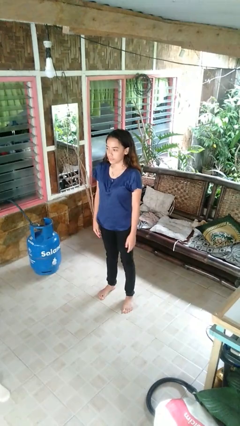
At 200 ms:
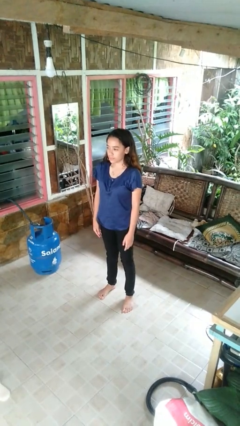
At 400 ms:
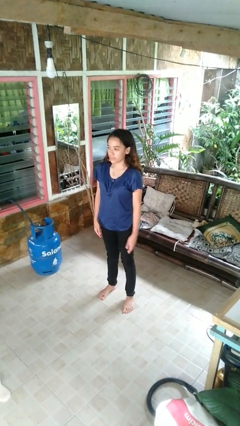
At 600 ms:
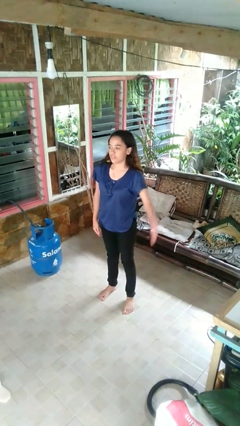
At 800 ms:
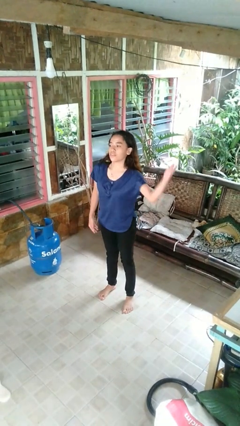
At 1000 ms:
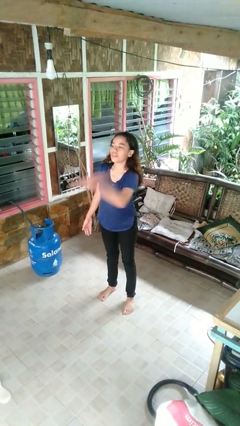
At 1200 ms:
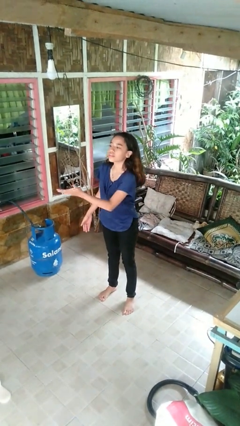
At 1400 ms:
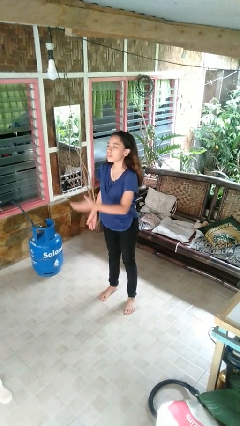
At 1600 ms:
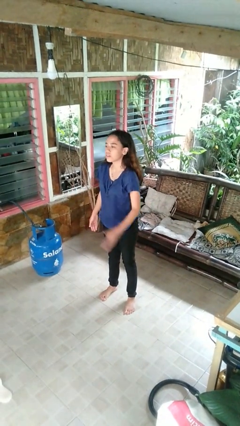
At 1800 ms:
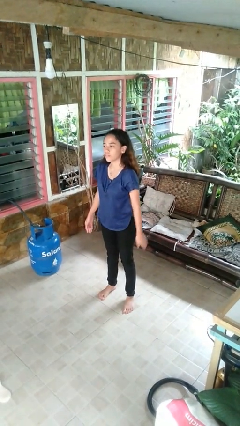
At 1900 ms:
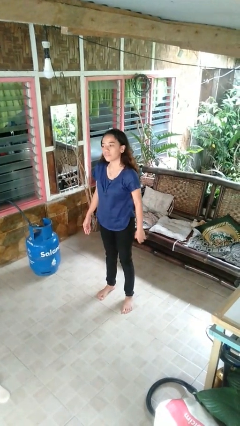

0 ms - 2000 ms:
person karate chop

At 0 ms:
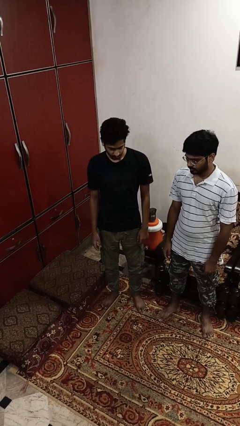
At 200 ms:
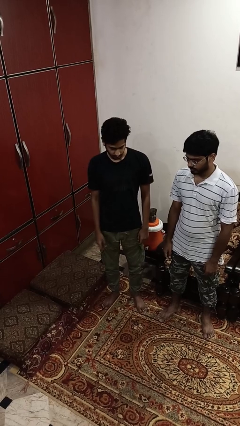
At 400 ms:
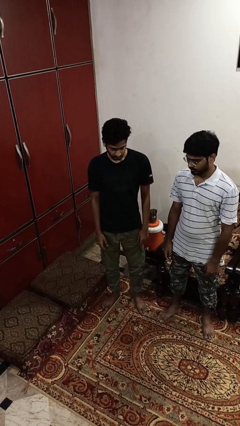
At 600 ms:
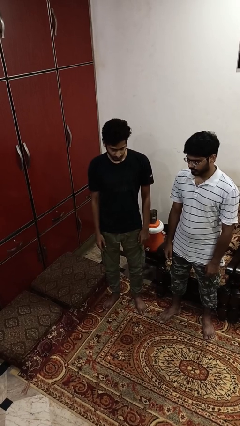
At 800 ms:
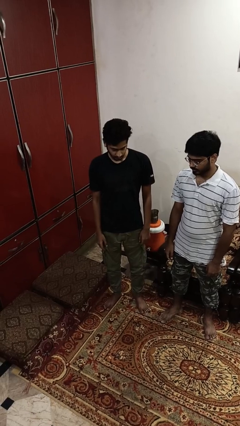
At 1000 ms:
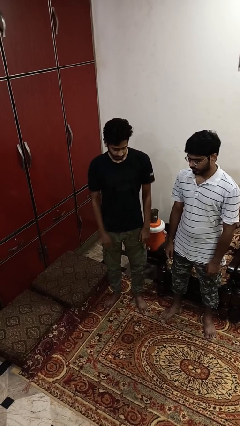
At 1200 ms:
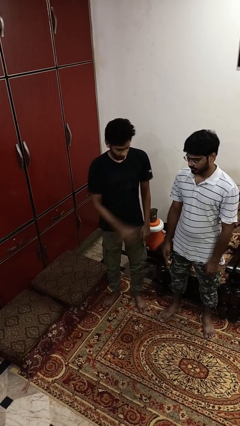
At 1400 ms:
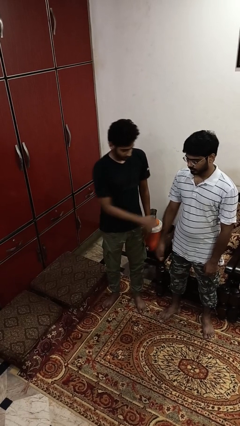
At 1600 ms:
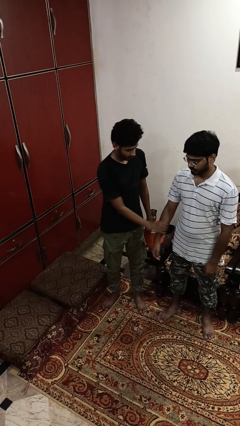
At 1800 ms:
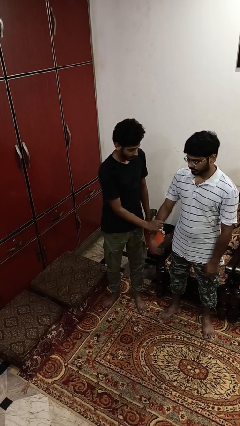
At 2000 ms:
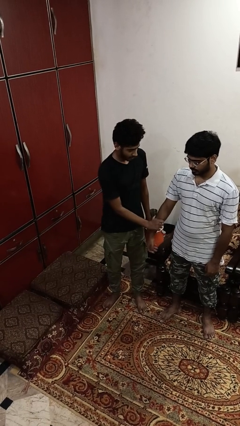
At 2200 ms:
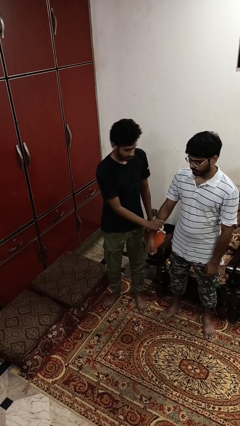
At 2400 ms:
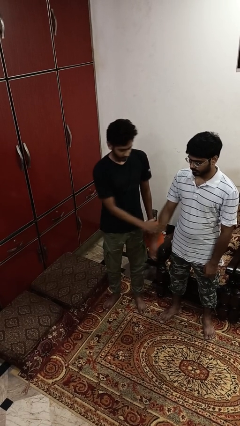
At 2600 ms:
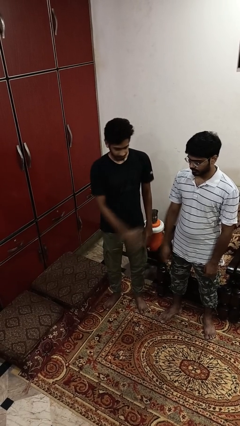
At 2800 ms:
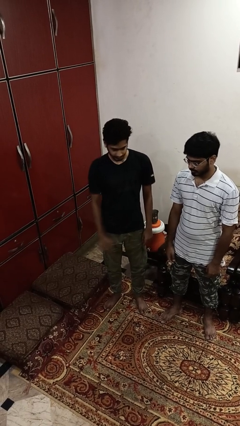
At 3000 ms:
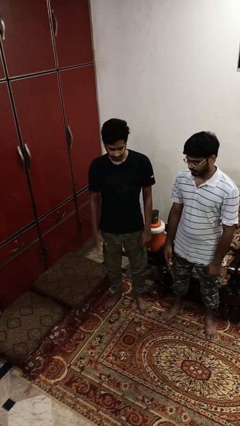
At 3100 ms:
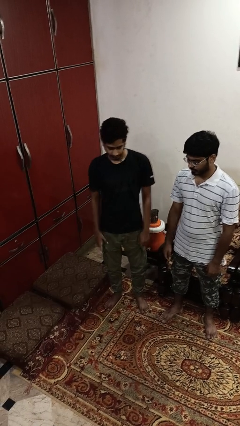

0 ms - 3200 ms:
person grabs person by forearm

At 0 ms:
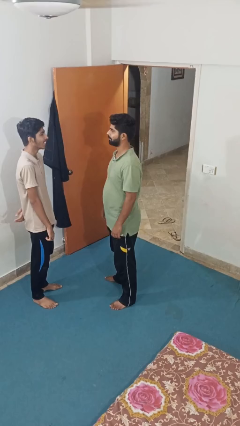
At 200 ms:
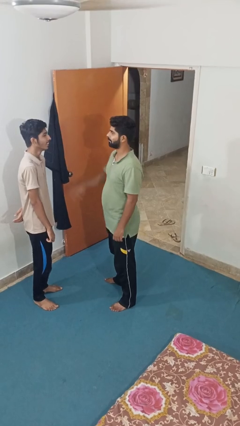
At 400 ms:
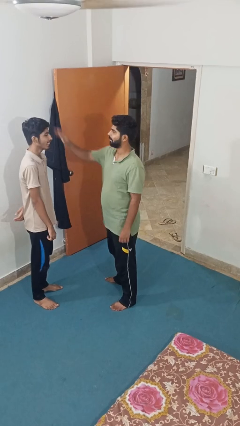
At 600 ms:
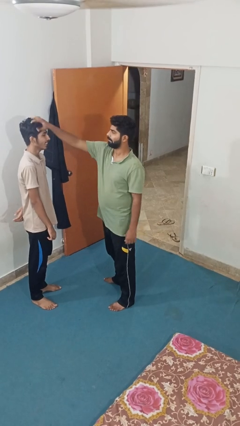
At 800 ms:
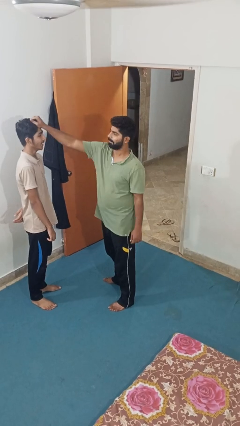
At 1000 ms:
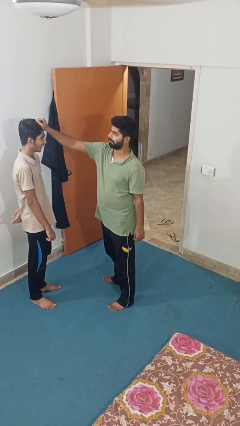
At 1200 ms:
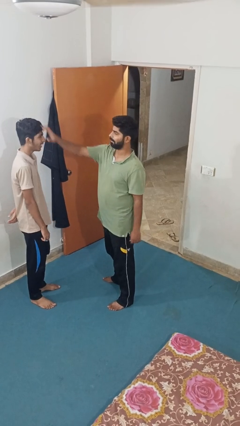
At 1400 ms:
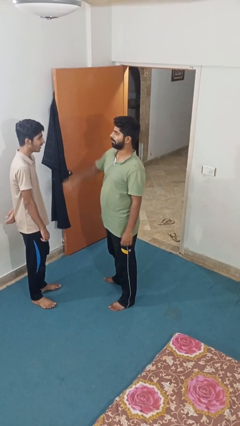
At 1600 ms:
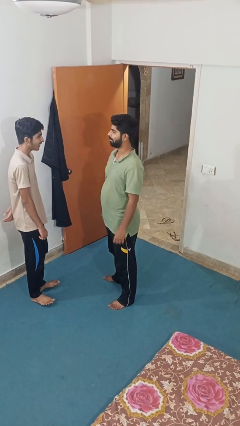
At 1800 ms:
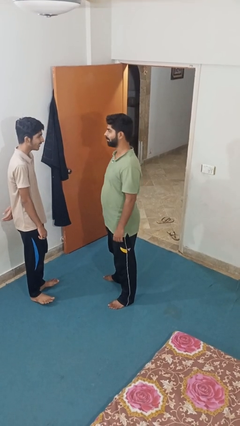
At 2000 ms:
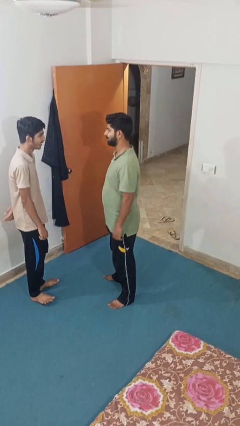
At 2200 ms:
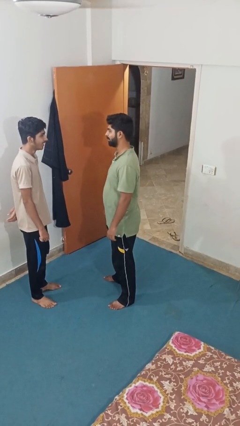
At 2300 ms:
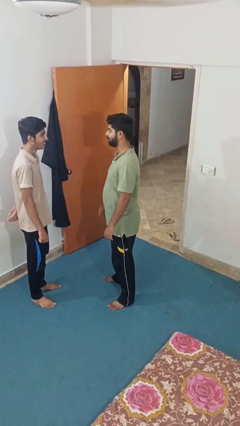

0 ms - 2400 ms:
person grabs person by hair

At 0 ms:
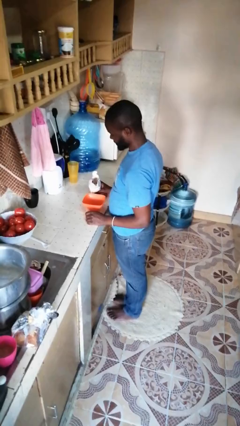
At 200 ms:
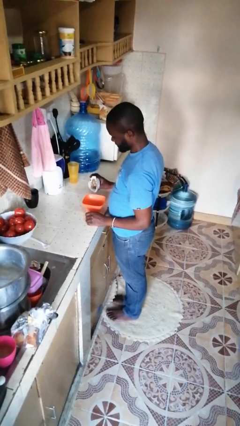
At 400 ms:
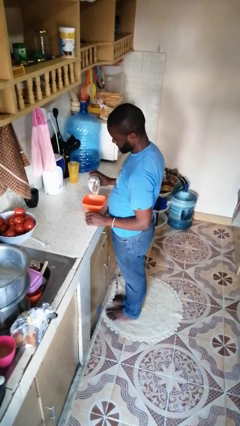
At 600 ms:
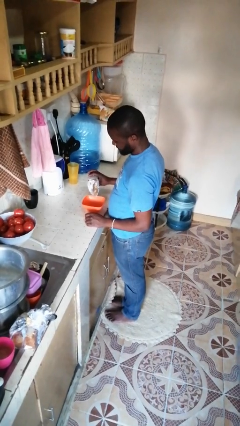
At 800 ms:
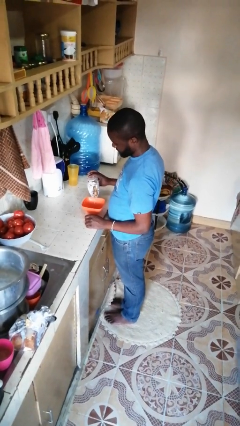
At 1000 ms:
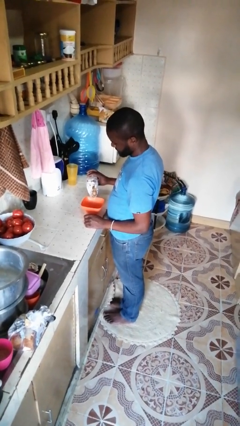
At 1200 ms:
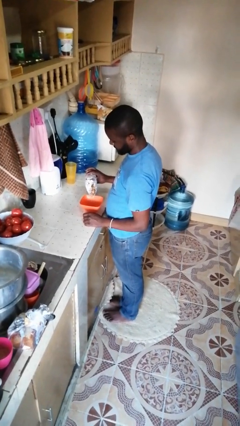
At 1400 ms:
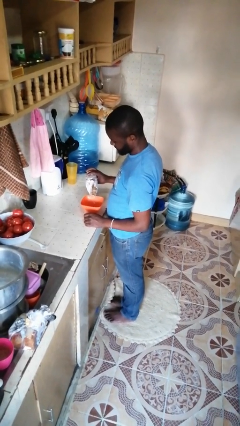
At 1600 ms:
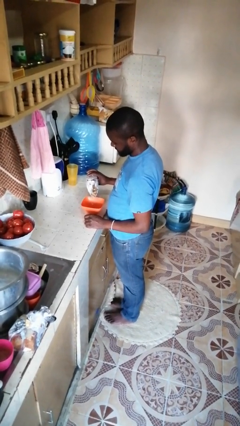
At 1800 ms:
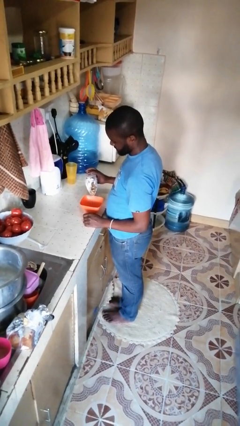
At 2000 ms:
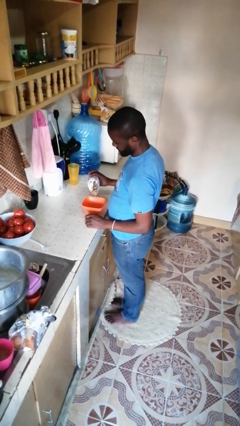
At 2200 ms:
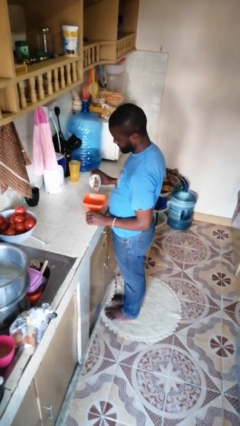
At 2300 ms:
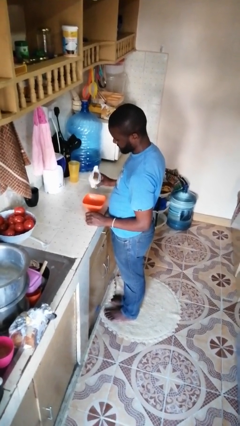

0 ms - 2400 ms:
person pours into bowl

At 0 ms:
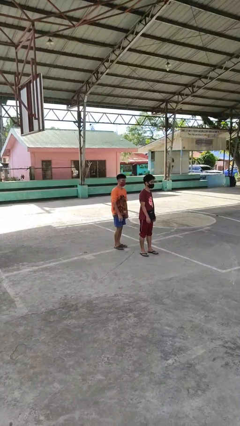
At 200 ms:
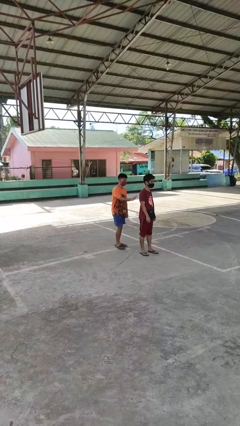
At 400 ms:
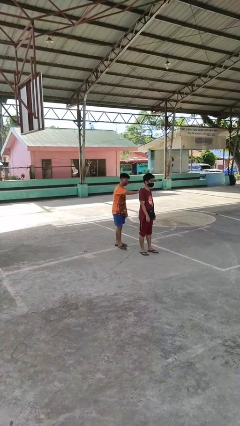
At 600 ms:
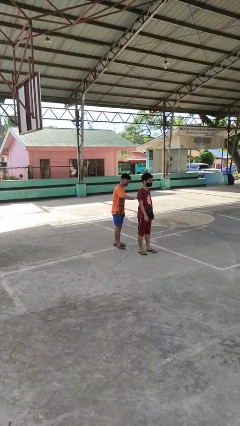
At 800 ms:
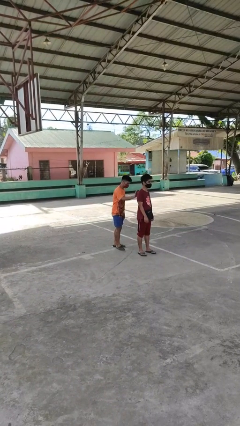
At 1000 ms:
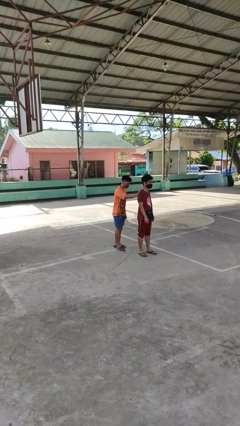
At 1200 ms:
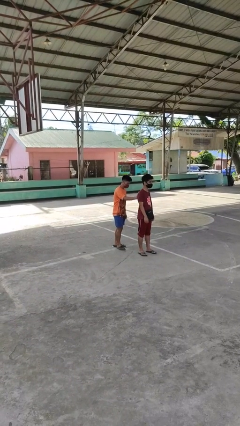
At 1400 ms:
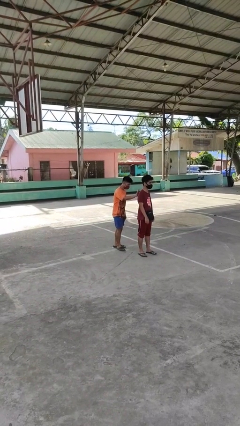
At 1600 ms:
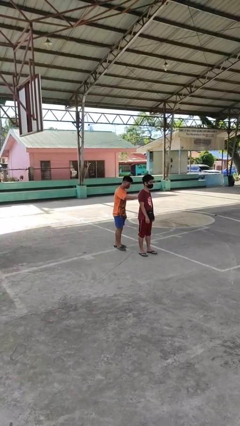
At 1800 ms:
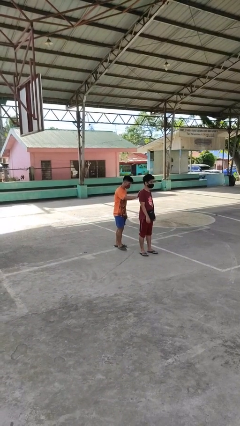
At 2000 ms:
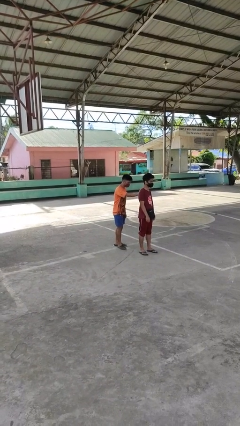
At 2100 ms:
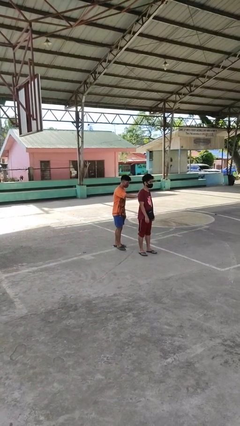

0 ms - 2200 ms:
person touches back of person

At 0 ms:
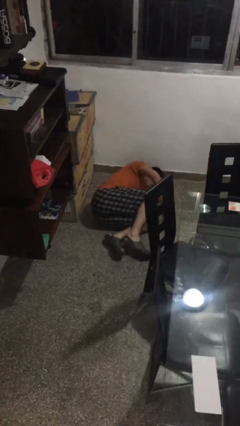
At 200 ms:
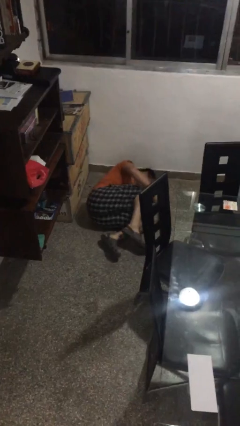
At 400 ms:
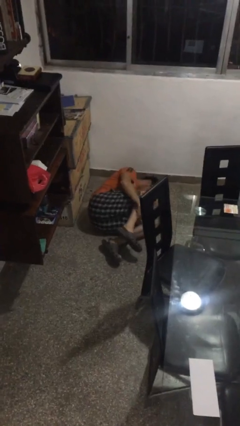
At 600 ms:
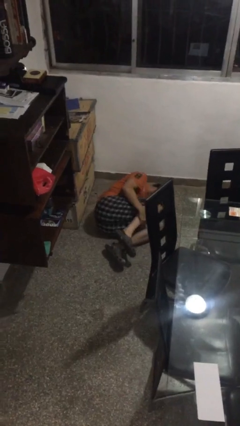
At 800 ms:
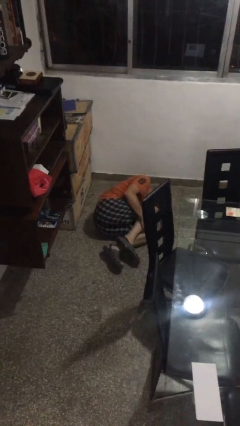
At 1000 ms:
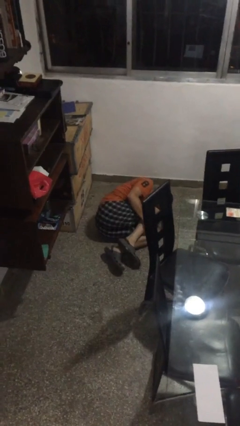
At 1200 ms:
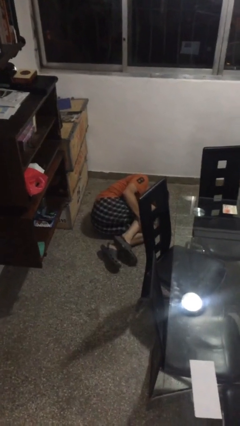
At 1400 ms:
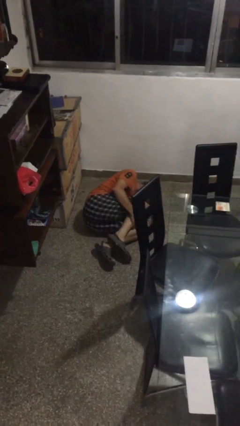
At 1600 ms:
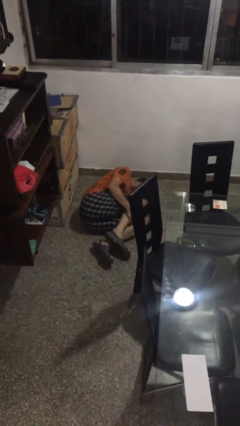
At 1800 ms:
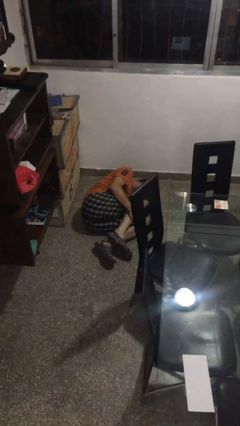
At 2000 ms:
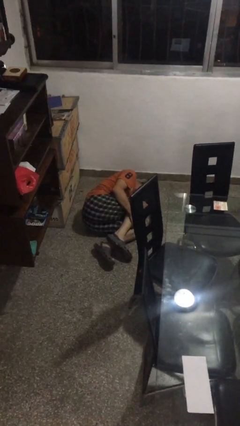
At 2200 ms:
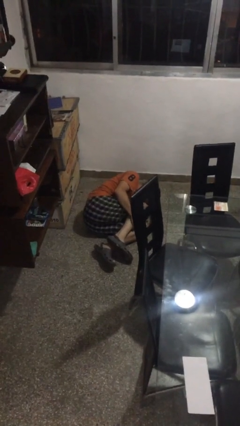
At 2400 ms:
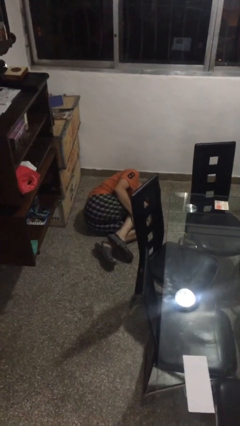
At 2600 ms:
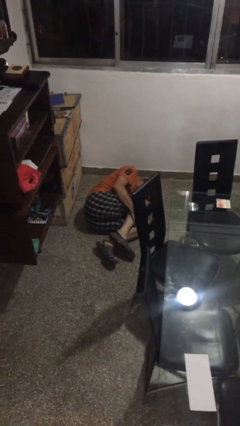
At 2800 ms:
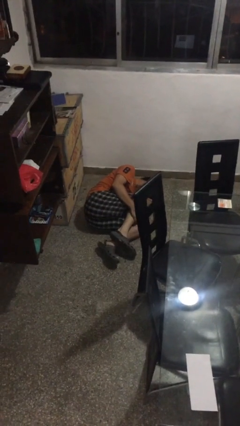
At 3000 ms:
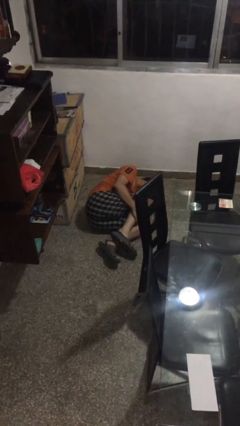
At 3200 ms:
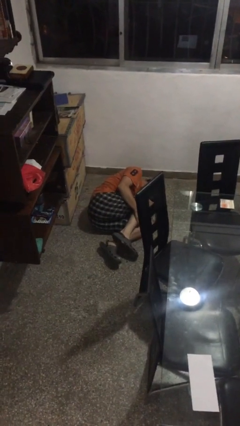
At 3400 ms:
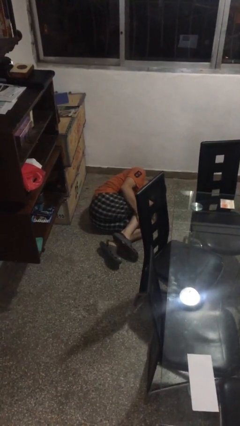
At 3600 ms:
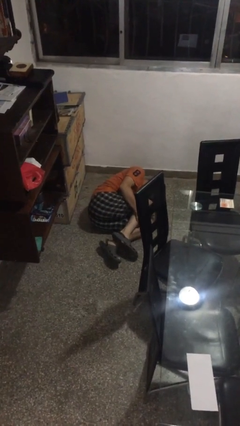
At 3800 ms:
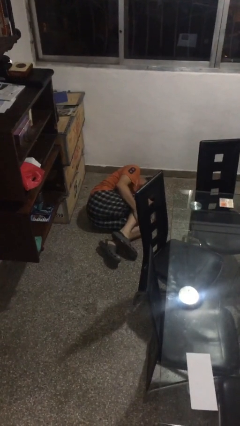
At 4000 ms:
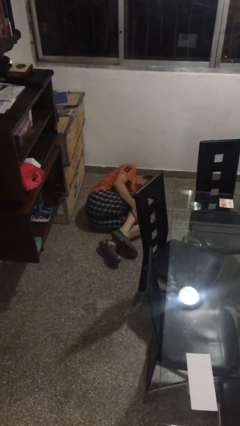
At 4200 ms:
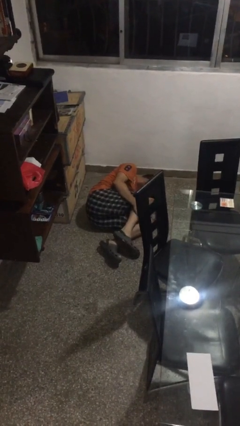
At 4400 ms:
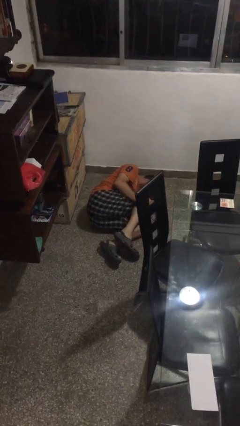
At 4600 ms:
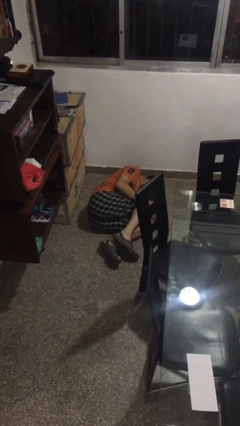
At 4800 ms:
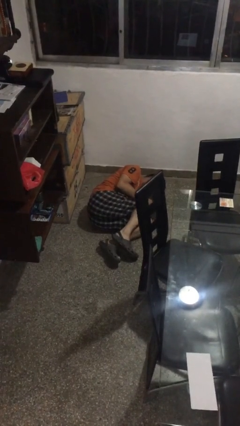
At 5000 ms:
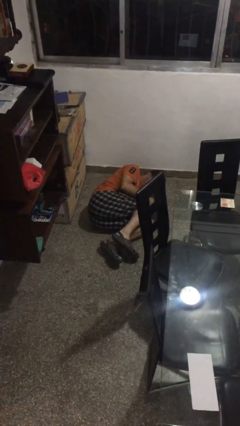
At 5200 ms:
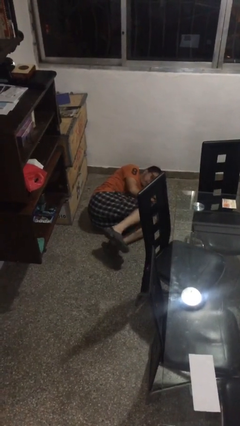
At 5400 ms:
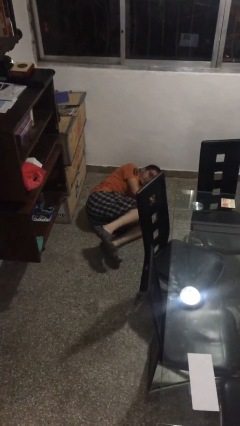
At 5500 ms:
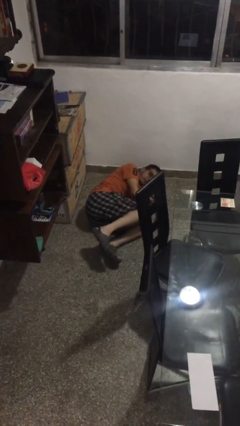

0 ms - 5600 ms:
person lies down on floor
